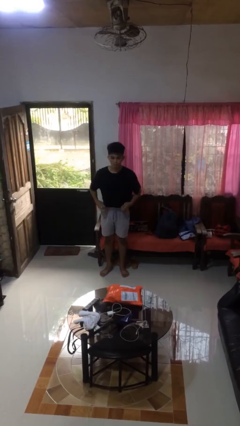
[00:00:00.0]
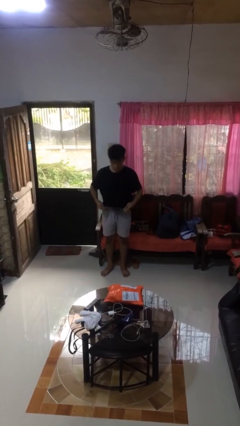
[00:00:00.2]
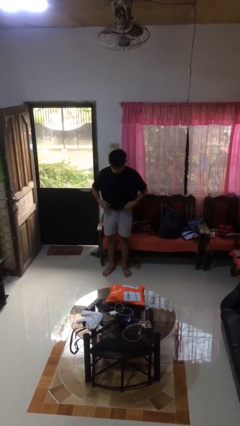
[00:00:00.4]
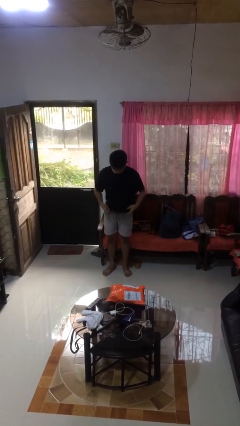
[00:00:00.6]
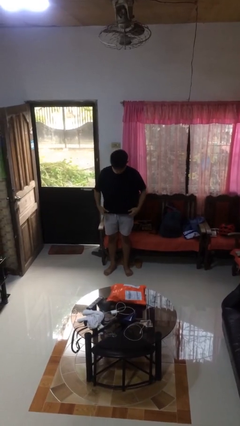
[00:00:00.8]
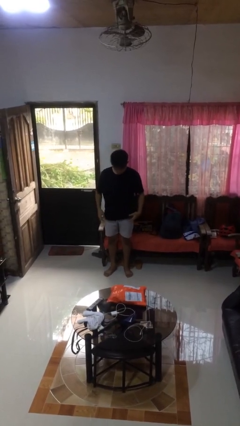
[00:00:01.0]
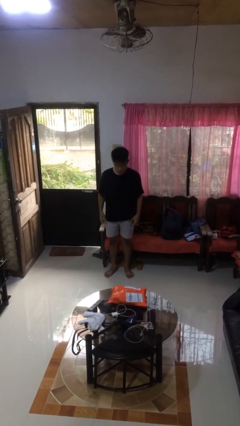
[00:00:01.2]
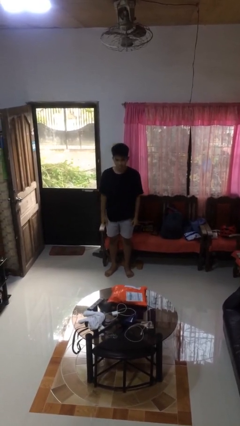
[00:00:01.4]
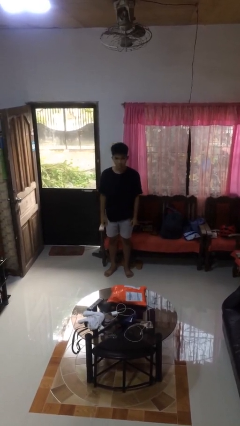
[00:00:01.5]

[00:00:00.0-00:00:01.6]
person untucks shirt

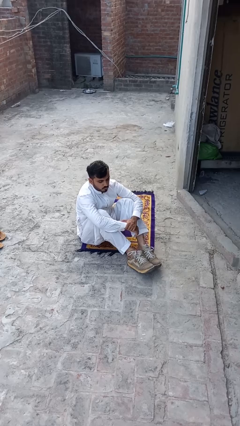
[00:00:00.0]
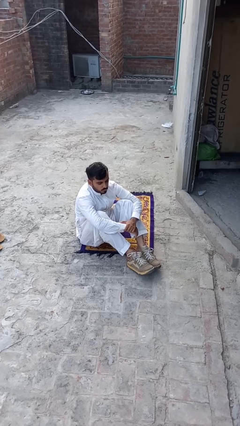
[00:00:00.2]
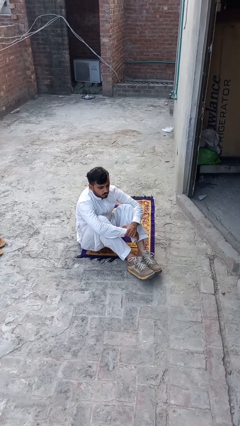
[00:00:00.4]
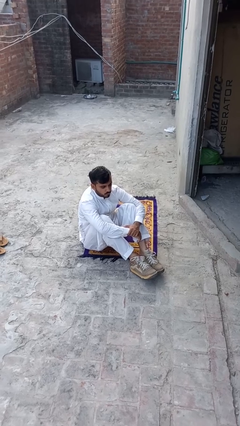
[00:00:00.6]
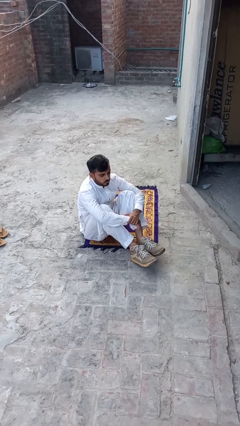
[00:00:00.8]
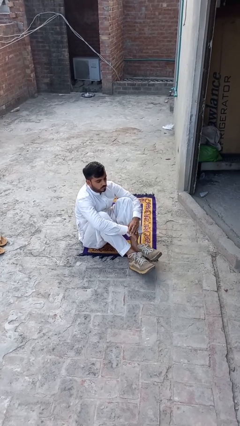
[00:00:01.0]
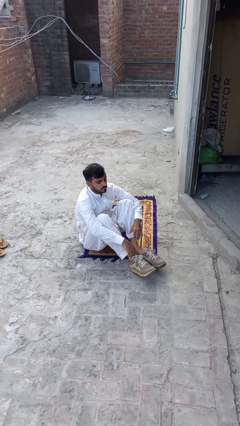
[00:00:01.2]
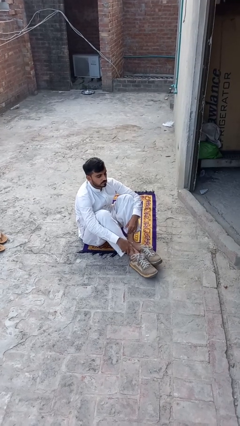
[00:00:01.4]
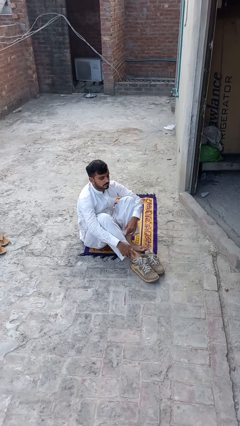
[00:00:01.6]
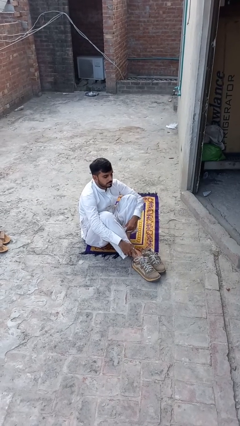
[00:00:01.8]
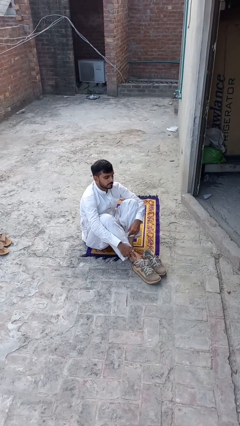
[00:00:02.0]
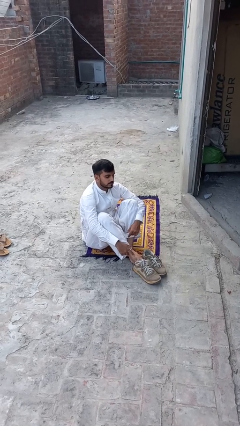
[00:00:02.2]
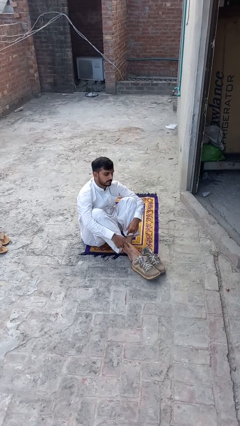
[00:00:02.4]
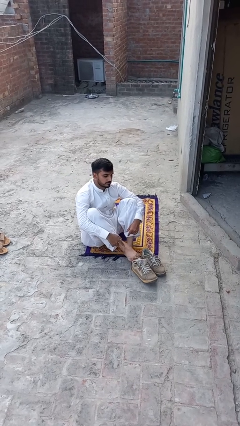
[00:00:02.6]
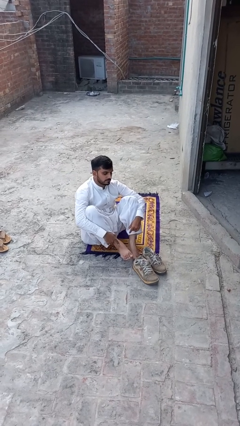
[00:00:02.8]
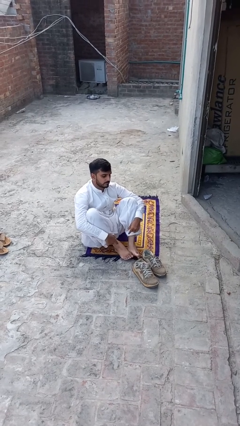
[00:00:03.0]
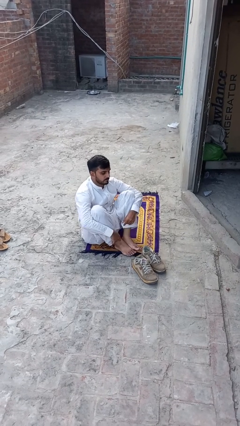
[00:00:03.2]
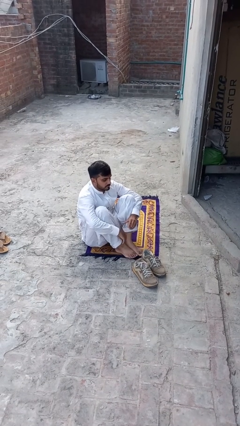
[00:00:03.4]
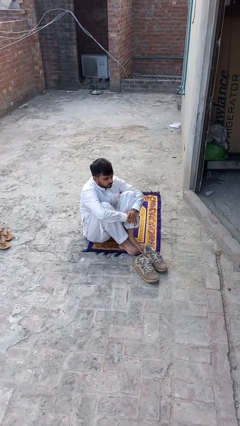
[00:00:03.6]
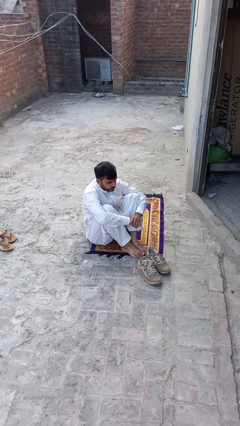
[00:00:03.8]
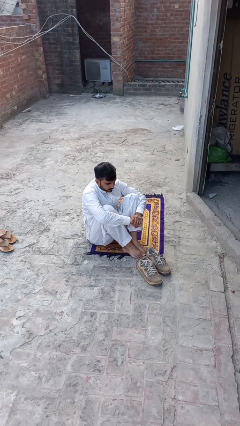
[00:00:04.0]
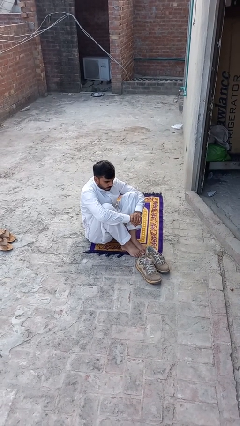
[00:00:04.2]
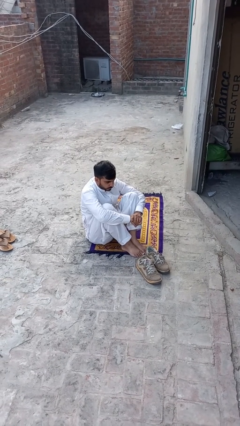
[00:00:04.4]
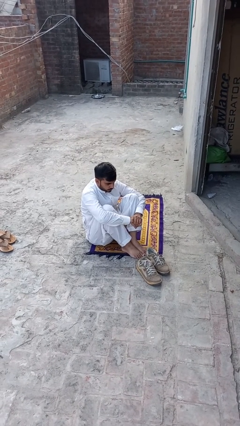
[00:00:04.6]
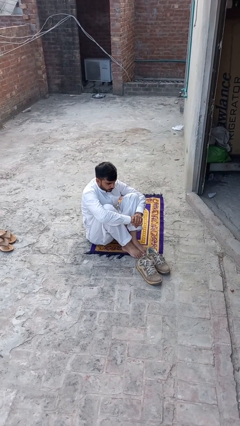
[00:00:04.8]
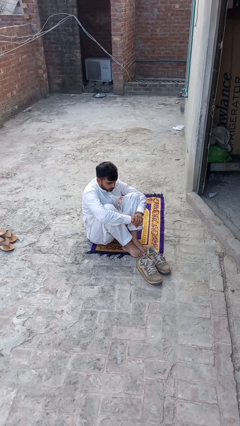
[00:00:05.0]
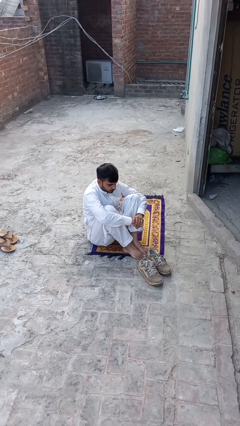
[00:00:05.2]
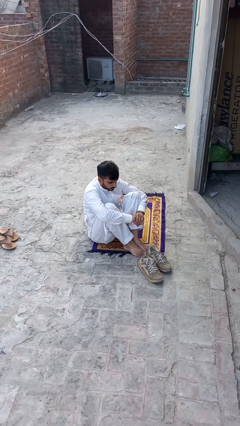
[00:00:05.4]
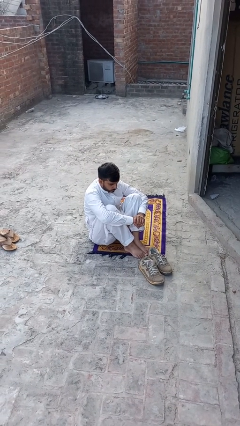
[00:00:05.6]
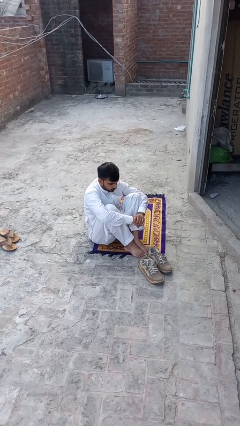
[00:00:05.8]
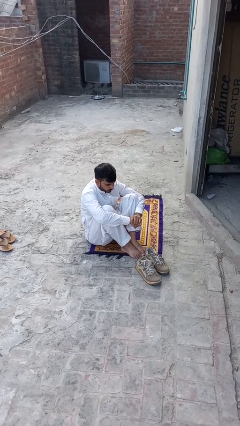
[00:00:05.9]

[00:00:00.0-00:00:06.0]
person takes off shoes

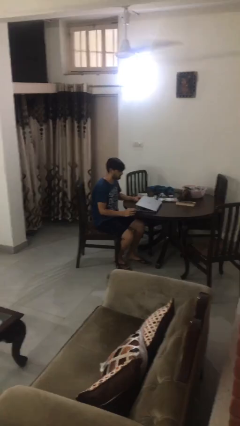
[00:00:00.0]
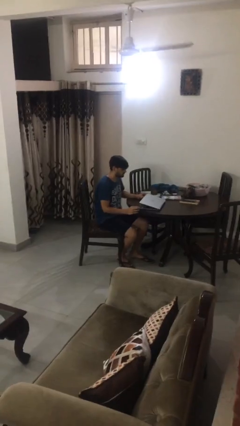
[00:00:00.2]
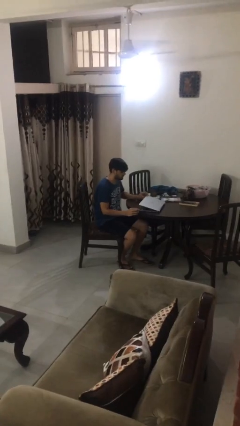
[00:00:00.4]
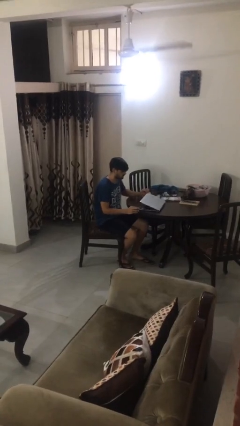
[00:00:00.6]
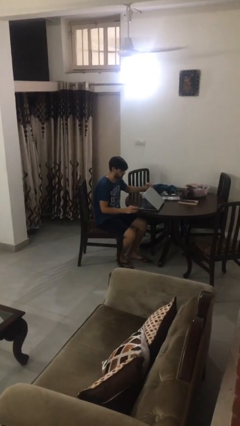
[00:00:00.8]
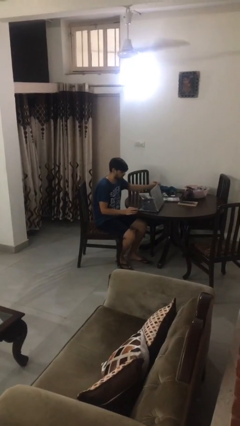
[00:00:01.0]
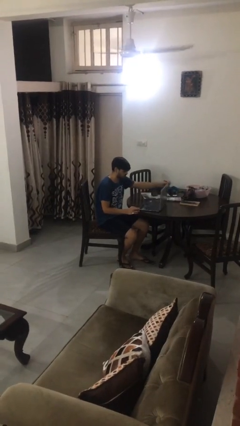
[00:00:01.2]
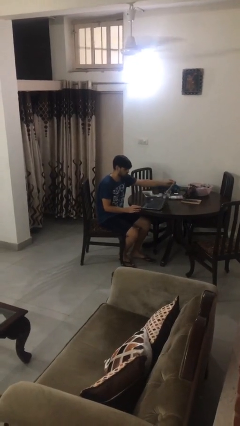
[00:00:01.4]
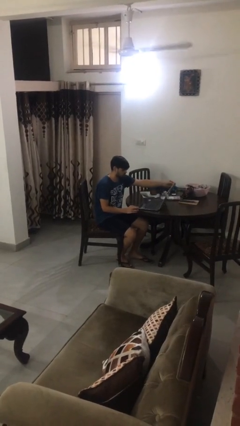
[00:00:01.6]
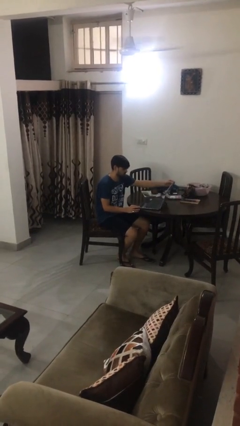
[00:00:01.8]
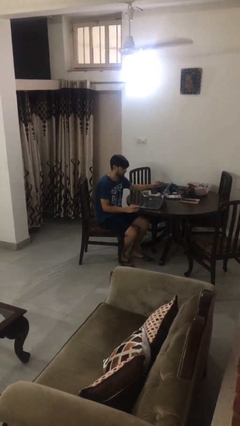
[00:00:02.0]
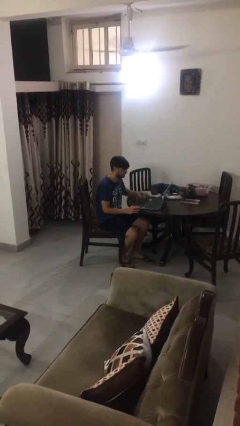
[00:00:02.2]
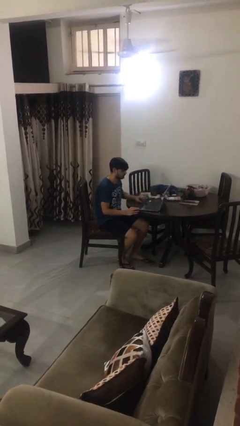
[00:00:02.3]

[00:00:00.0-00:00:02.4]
person opens laptop

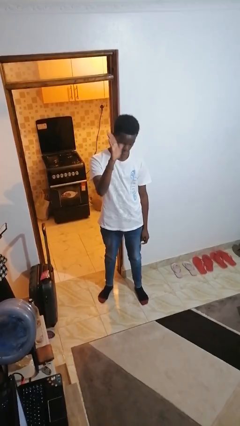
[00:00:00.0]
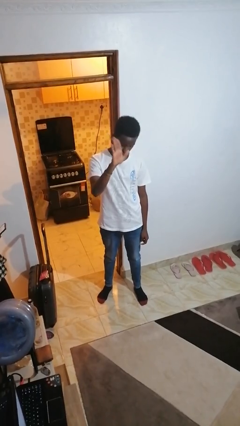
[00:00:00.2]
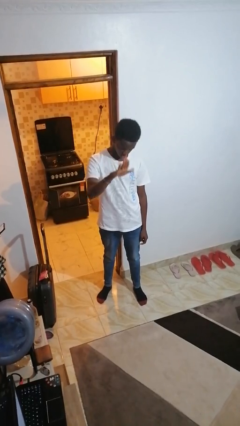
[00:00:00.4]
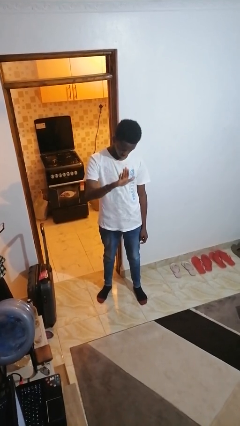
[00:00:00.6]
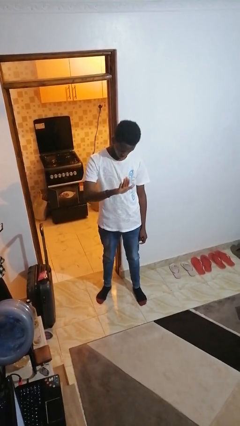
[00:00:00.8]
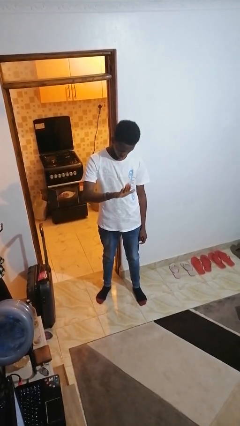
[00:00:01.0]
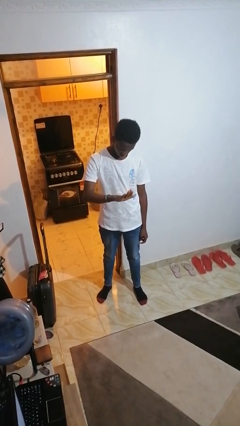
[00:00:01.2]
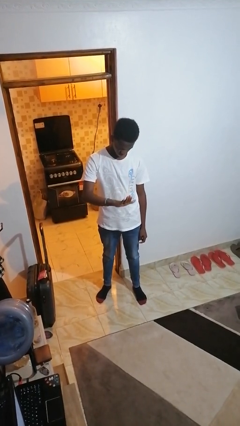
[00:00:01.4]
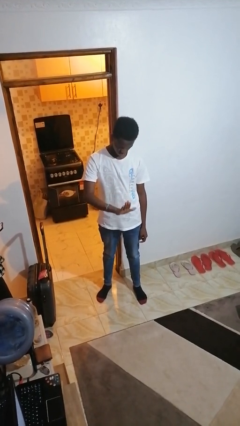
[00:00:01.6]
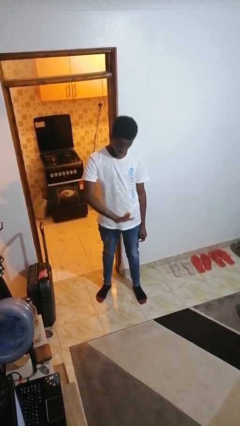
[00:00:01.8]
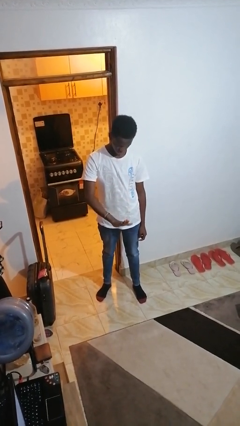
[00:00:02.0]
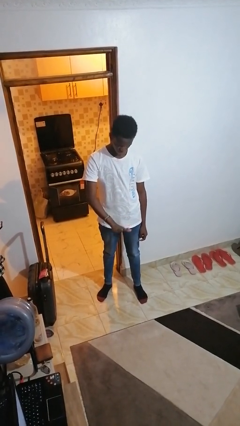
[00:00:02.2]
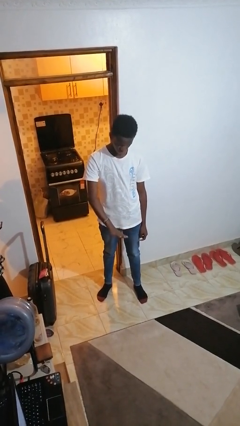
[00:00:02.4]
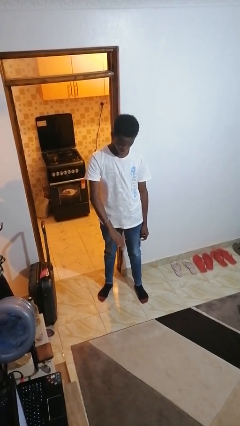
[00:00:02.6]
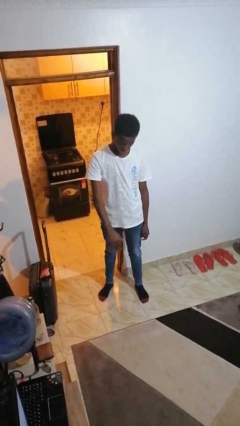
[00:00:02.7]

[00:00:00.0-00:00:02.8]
person gestures swipe down

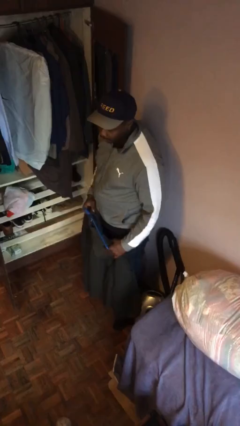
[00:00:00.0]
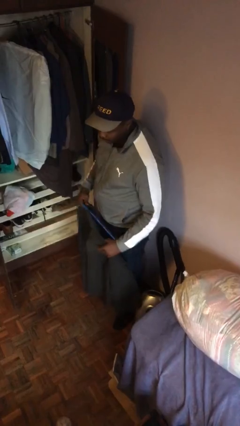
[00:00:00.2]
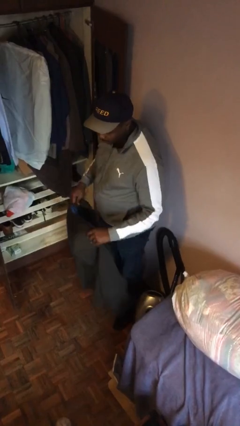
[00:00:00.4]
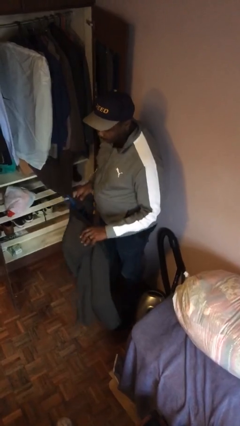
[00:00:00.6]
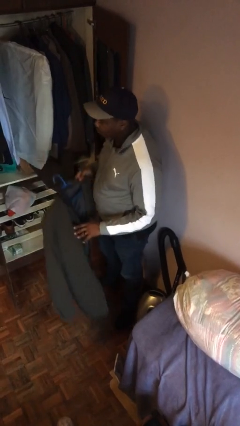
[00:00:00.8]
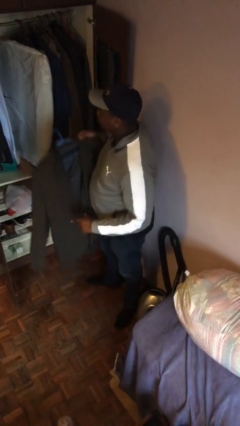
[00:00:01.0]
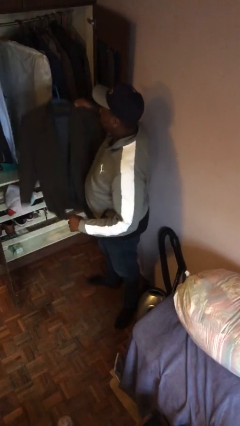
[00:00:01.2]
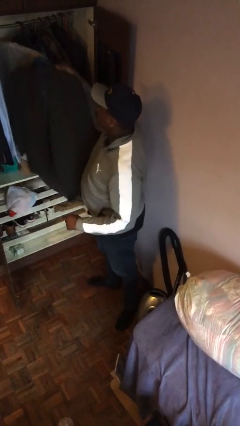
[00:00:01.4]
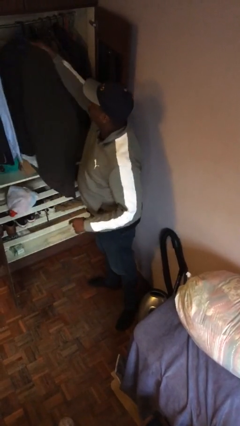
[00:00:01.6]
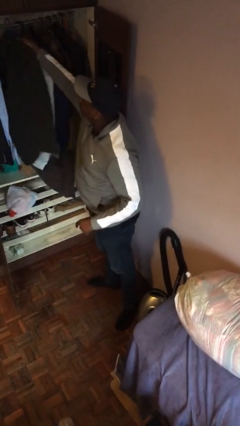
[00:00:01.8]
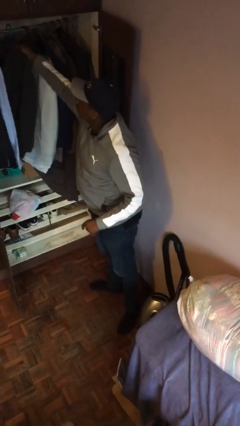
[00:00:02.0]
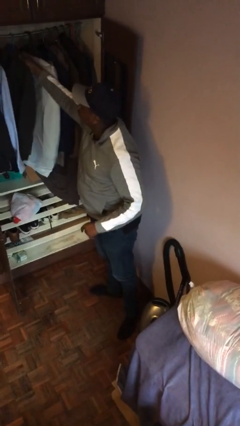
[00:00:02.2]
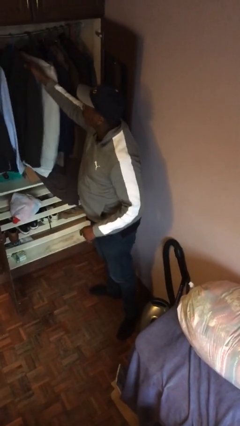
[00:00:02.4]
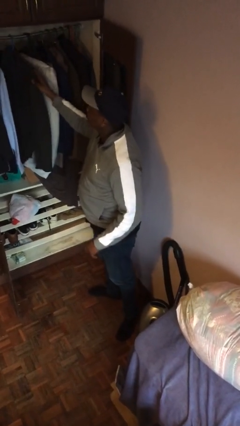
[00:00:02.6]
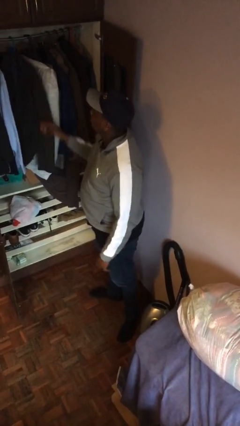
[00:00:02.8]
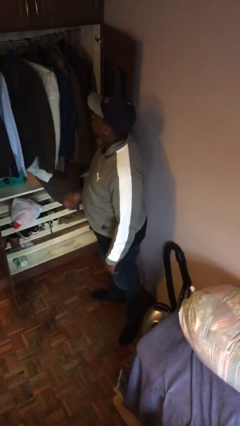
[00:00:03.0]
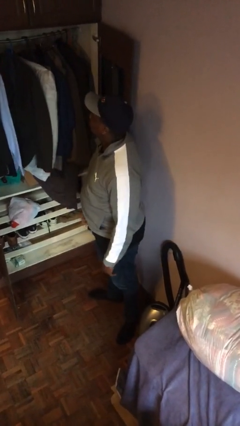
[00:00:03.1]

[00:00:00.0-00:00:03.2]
person puts clothes into closet

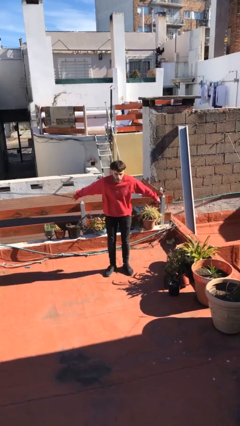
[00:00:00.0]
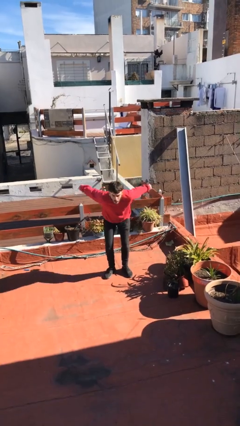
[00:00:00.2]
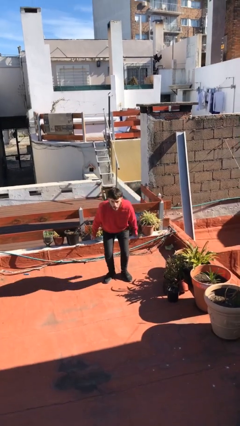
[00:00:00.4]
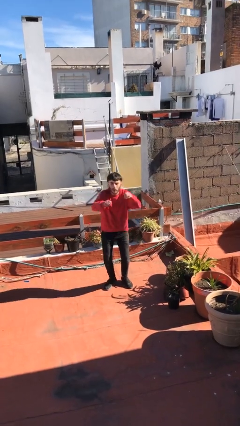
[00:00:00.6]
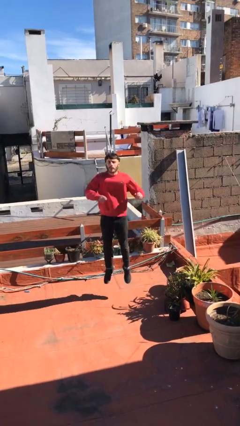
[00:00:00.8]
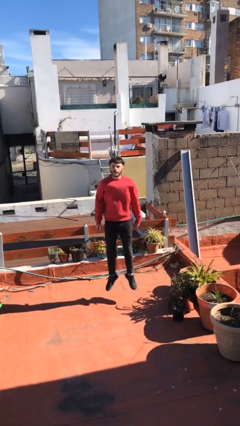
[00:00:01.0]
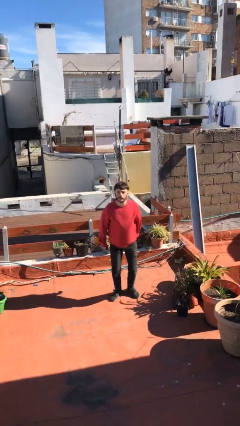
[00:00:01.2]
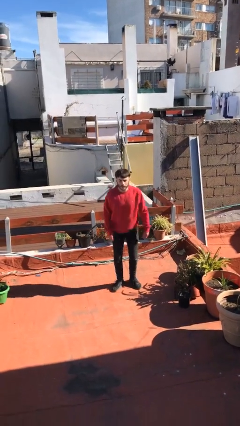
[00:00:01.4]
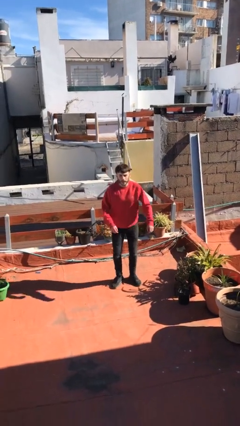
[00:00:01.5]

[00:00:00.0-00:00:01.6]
person jumps
